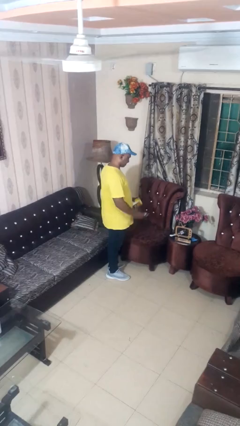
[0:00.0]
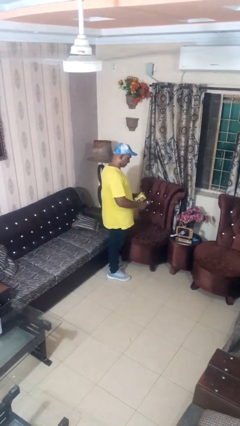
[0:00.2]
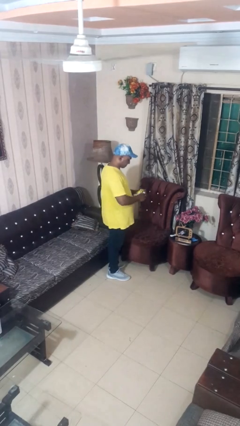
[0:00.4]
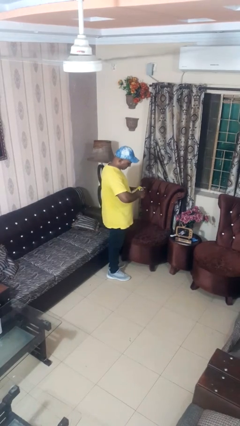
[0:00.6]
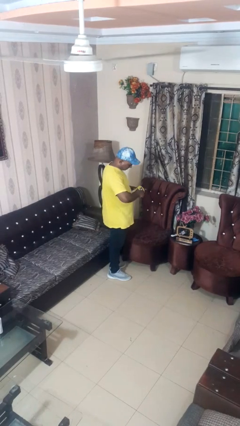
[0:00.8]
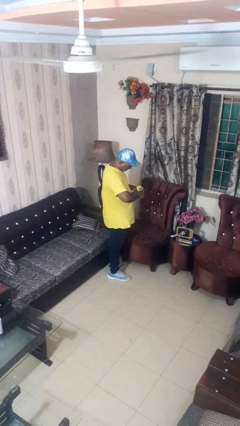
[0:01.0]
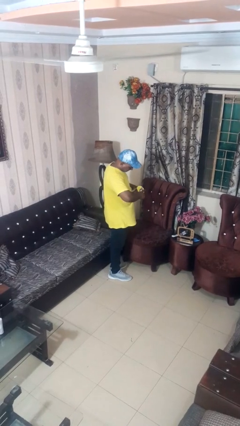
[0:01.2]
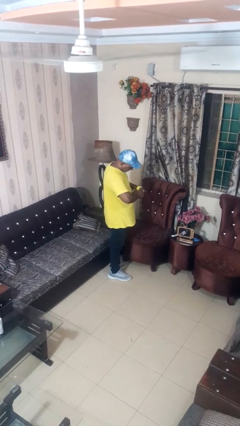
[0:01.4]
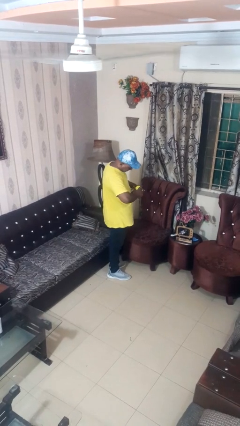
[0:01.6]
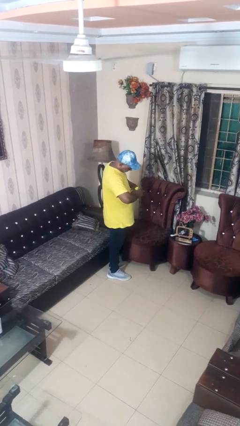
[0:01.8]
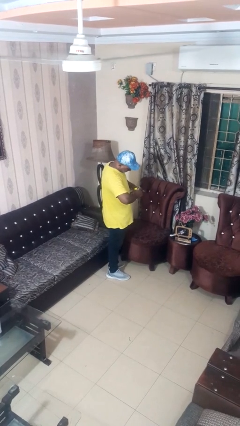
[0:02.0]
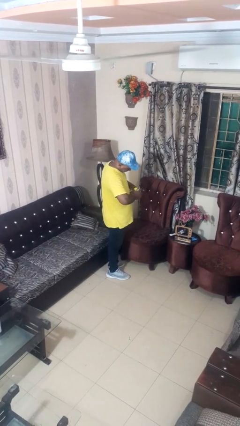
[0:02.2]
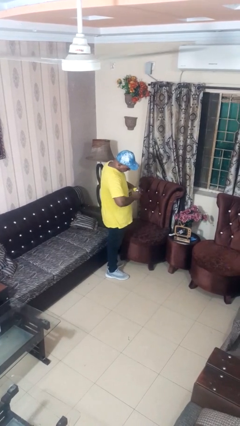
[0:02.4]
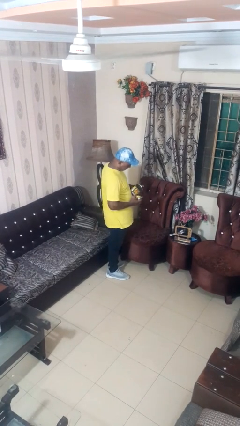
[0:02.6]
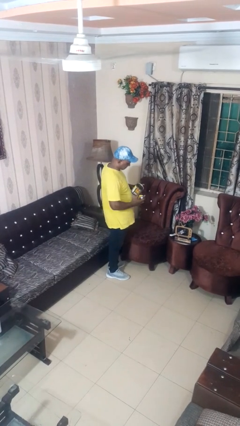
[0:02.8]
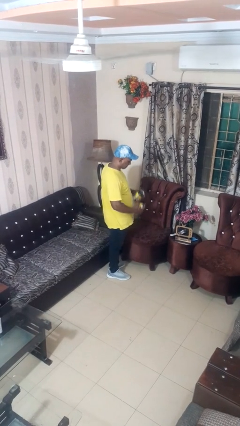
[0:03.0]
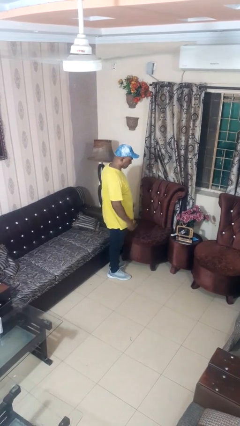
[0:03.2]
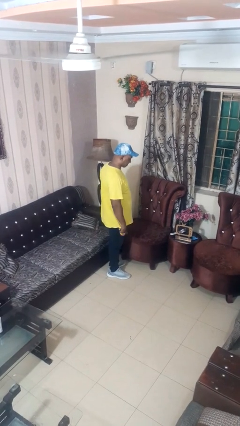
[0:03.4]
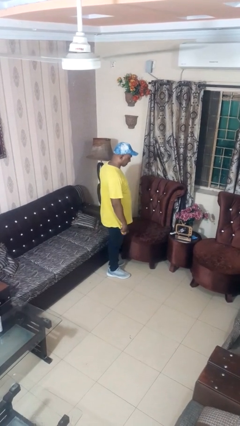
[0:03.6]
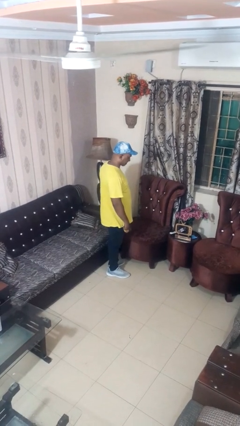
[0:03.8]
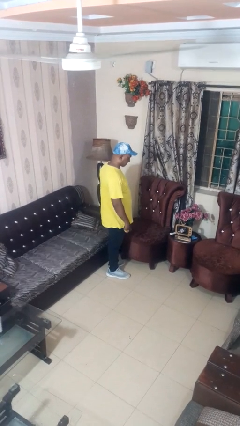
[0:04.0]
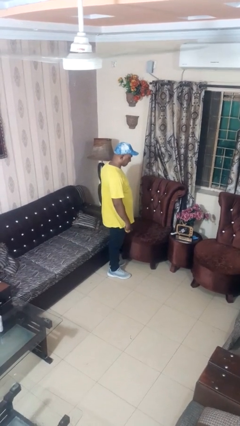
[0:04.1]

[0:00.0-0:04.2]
person opens can with can opener

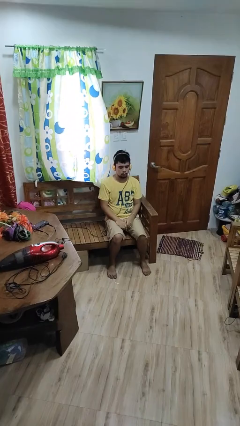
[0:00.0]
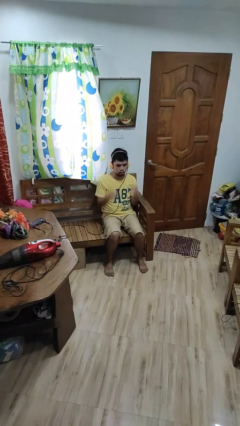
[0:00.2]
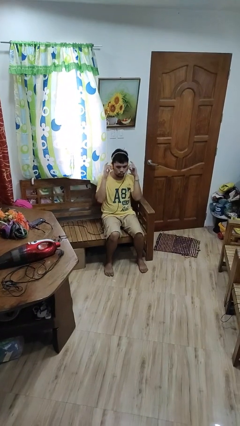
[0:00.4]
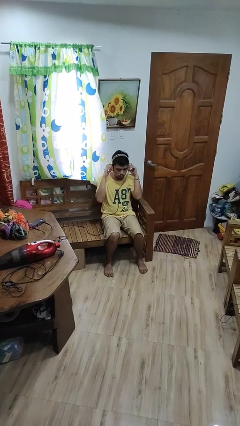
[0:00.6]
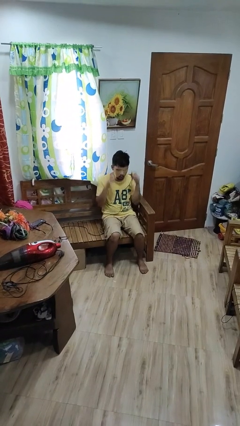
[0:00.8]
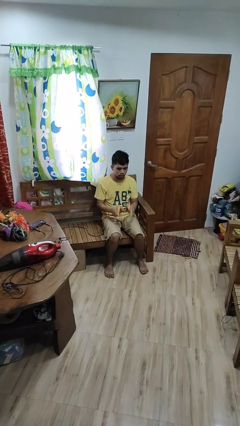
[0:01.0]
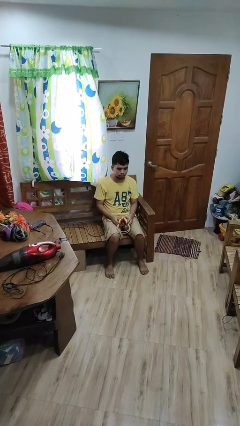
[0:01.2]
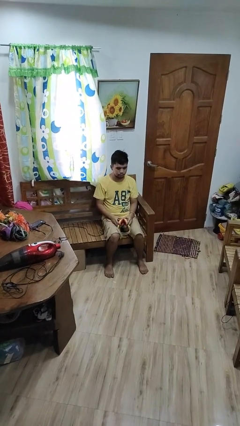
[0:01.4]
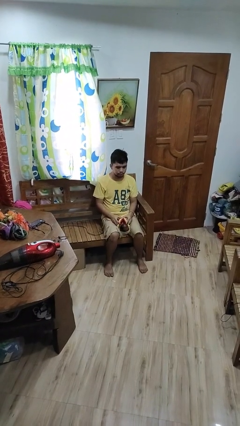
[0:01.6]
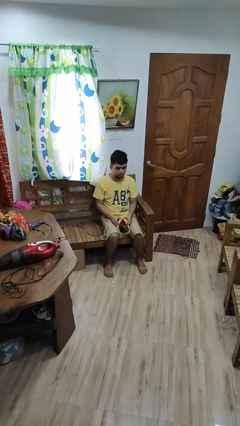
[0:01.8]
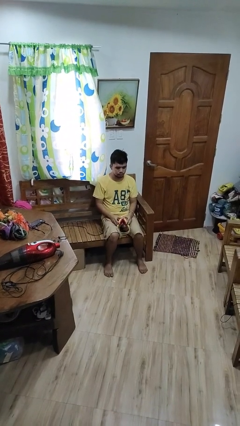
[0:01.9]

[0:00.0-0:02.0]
person takes off headphones

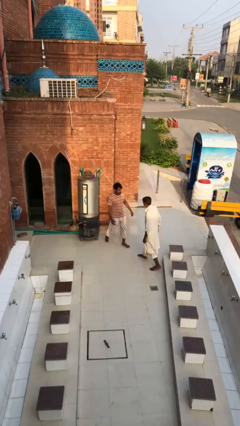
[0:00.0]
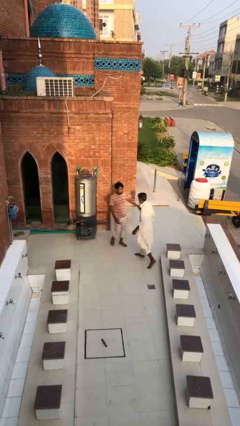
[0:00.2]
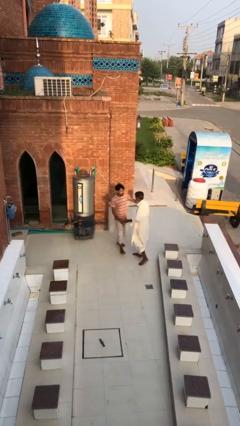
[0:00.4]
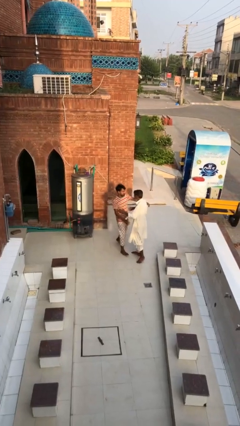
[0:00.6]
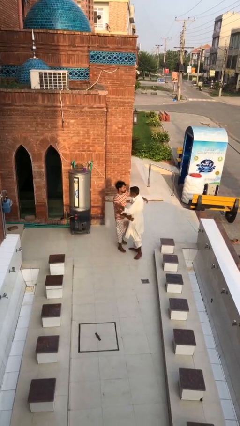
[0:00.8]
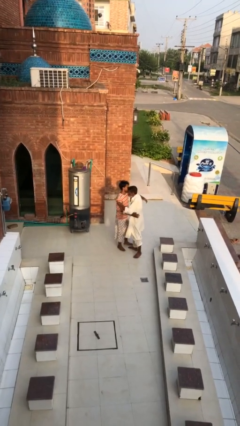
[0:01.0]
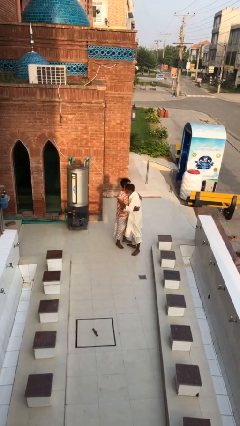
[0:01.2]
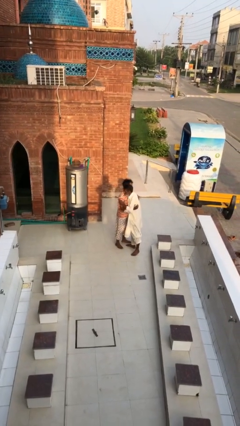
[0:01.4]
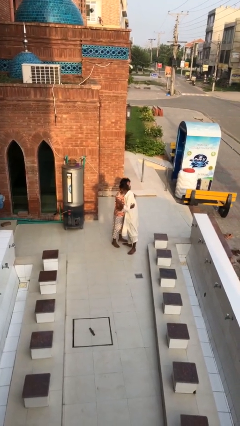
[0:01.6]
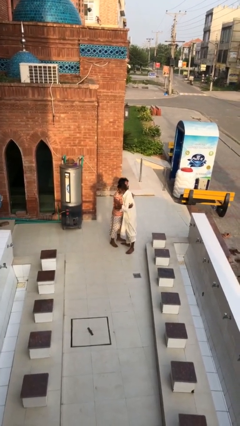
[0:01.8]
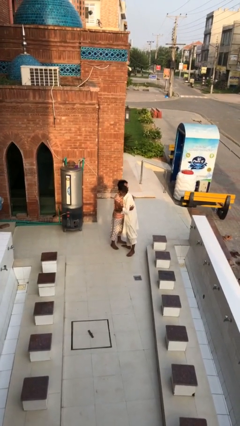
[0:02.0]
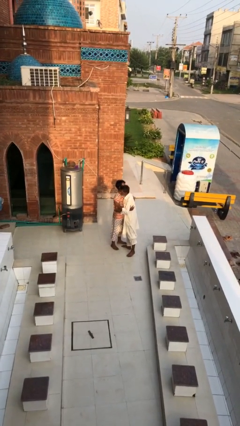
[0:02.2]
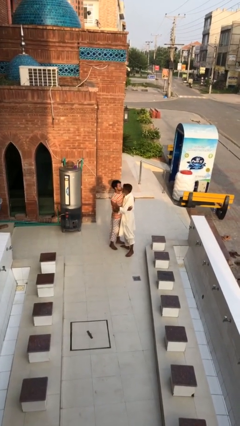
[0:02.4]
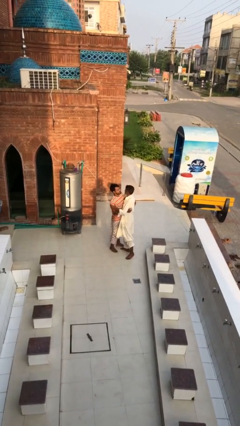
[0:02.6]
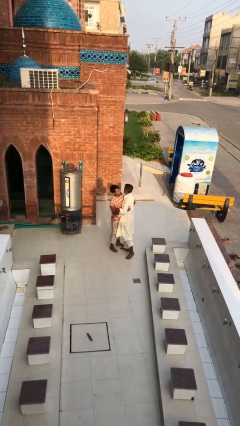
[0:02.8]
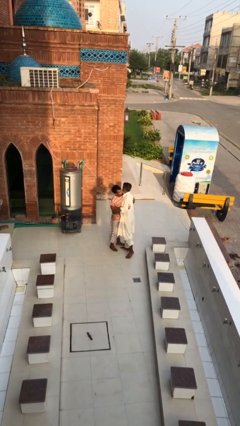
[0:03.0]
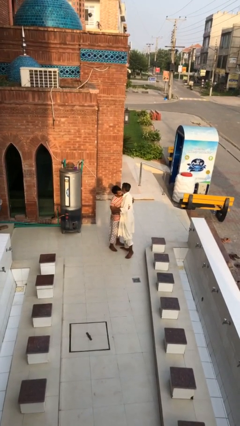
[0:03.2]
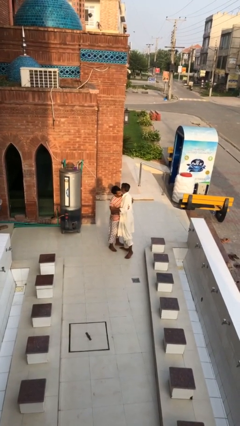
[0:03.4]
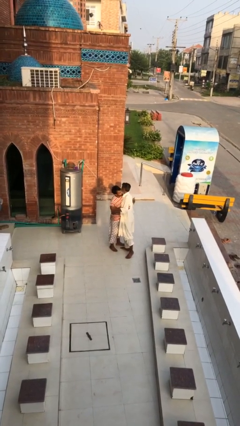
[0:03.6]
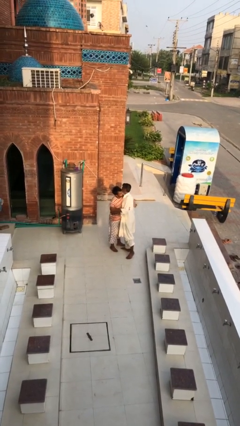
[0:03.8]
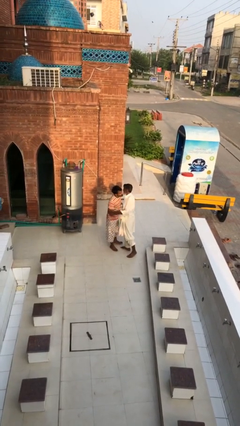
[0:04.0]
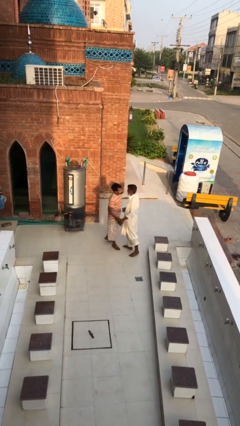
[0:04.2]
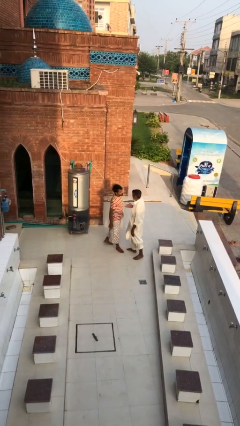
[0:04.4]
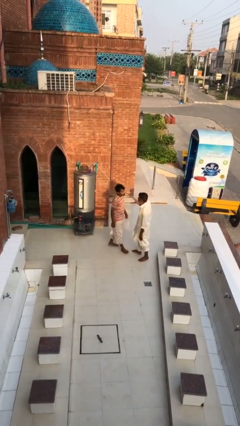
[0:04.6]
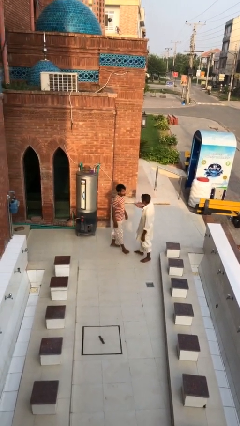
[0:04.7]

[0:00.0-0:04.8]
person embraces person

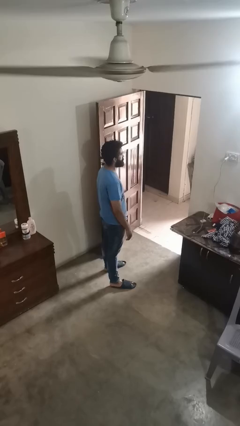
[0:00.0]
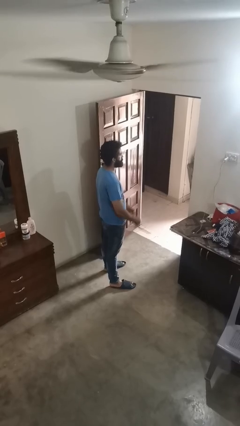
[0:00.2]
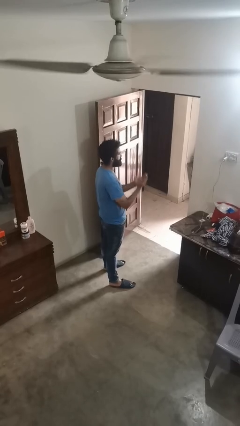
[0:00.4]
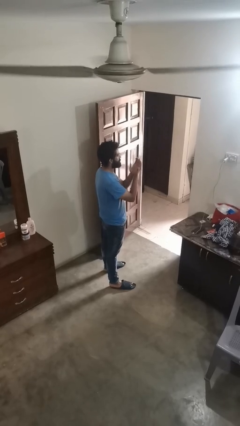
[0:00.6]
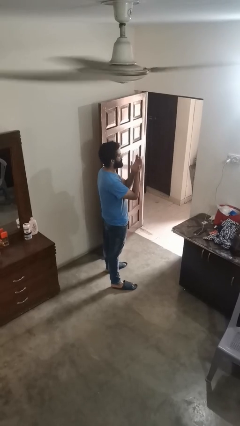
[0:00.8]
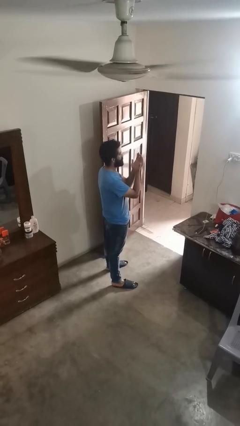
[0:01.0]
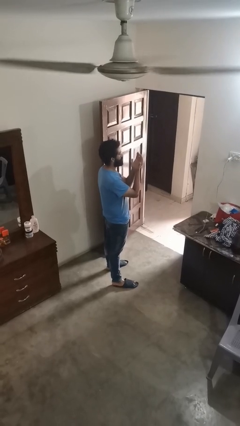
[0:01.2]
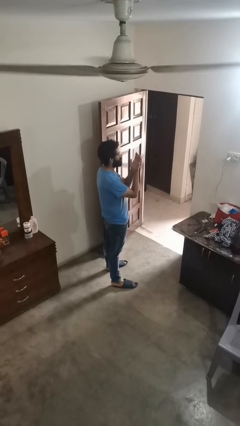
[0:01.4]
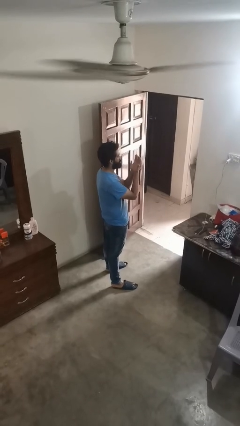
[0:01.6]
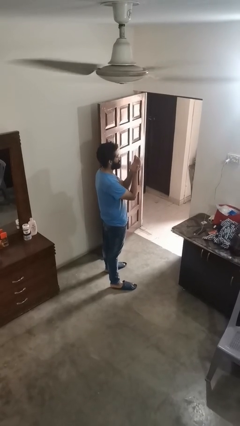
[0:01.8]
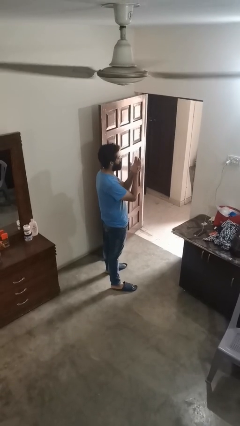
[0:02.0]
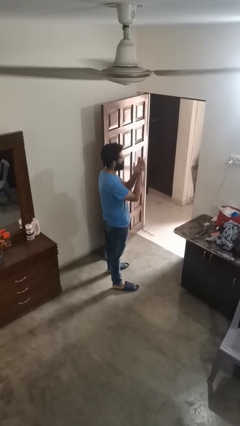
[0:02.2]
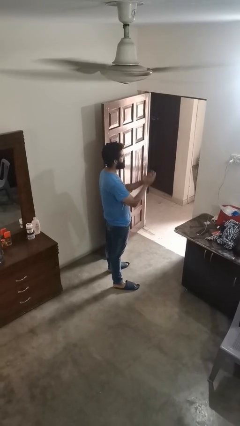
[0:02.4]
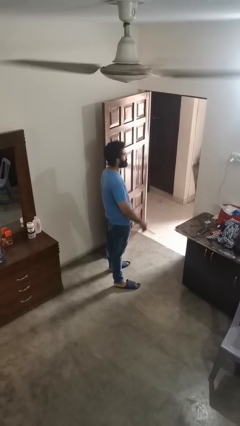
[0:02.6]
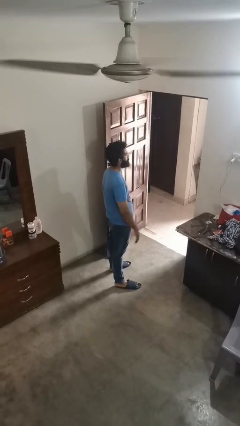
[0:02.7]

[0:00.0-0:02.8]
person prays

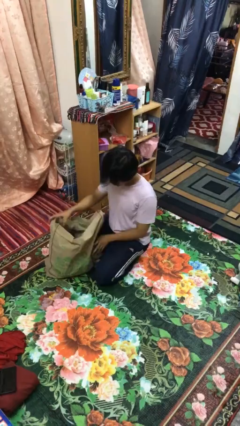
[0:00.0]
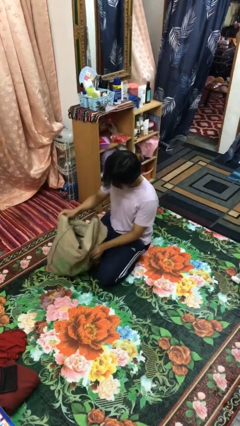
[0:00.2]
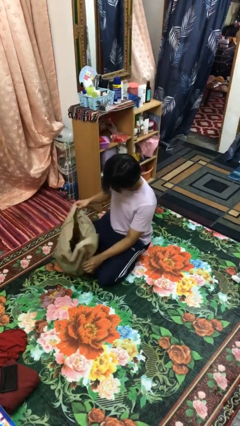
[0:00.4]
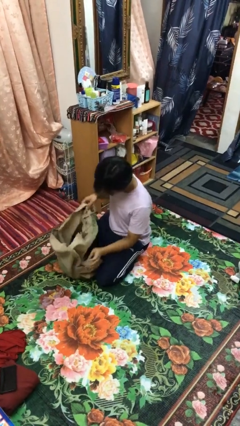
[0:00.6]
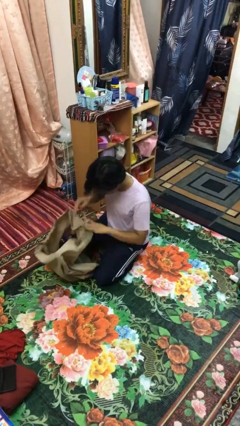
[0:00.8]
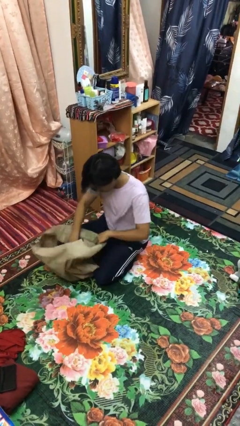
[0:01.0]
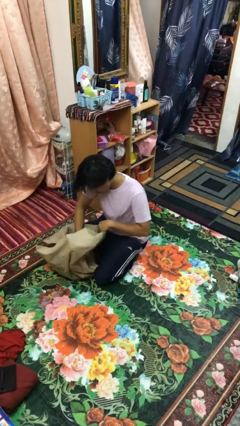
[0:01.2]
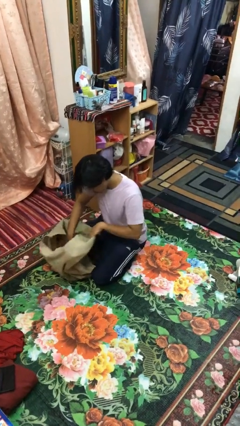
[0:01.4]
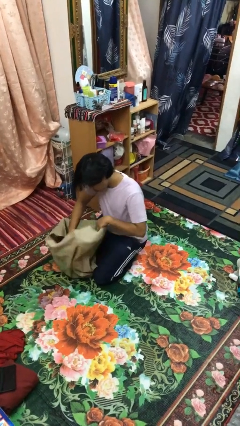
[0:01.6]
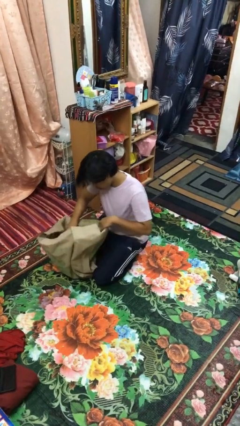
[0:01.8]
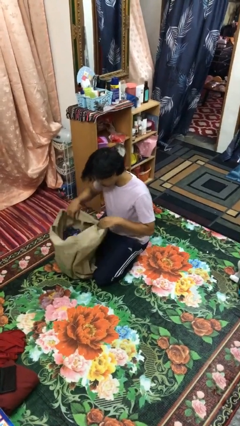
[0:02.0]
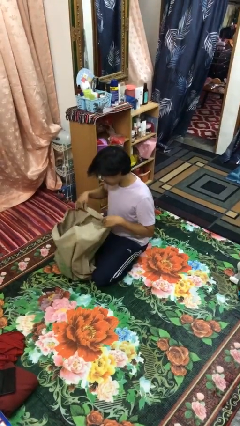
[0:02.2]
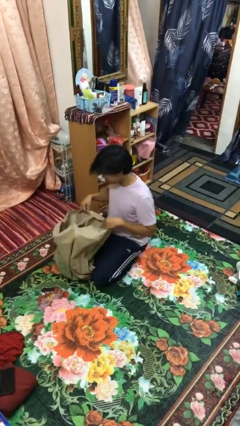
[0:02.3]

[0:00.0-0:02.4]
person searches in bag

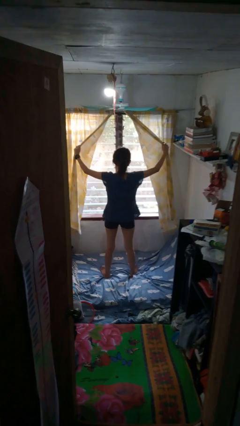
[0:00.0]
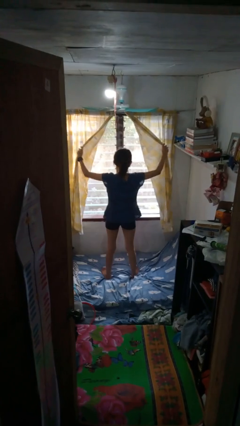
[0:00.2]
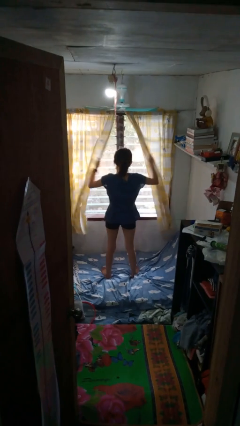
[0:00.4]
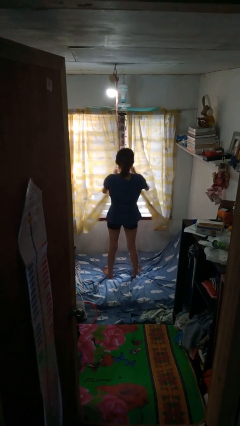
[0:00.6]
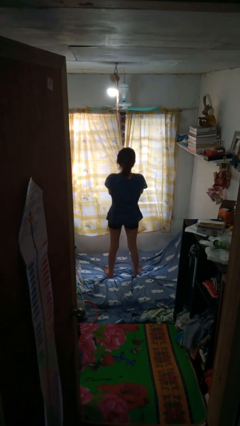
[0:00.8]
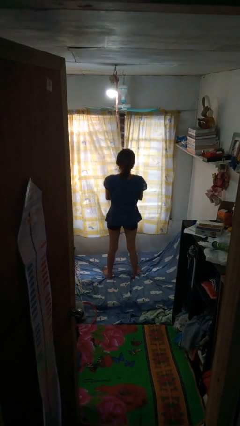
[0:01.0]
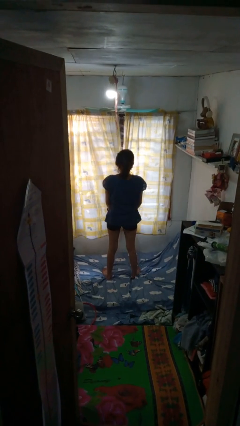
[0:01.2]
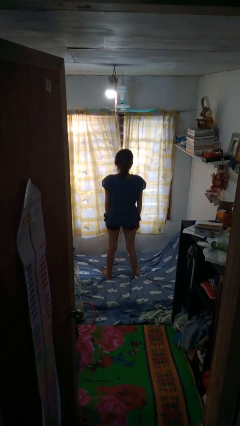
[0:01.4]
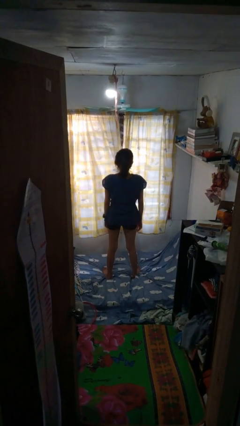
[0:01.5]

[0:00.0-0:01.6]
person closes curtains
